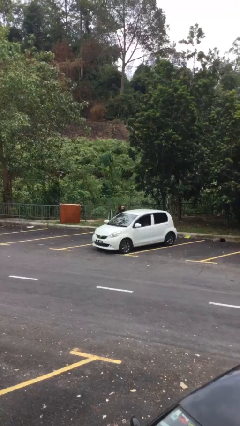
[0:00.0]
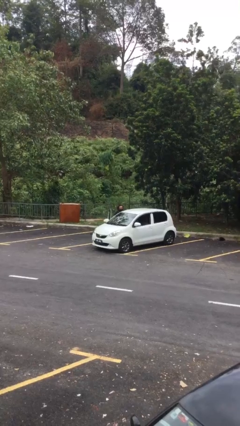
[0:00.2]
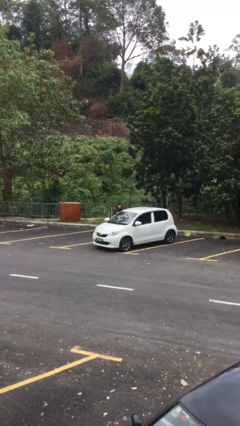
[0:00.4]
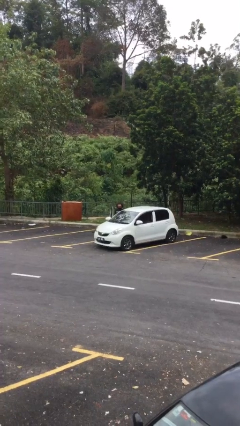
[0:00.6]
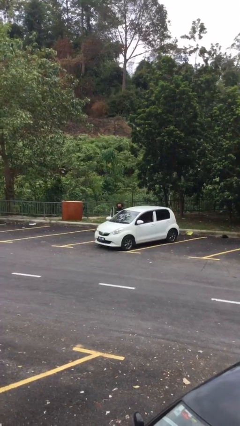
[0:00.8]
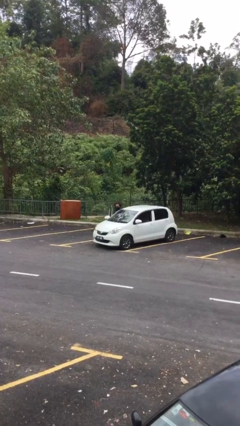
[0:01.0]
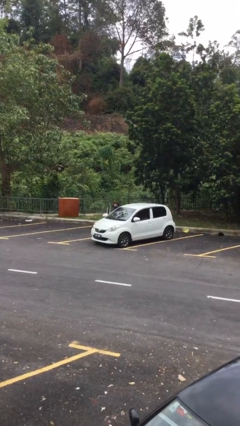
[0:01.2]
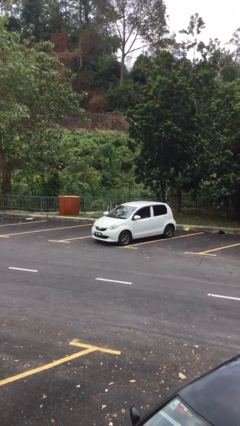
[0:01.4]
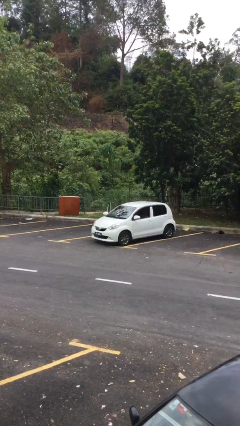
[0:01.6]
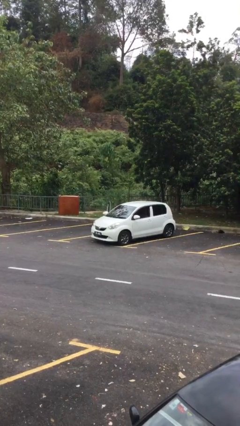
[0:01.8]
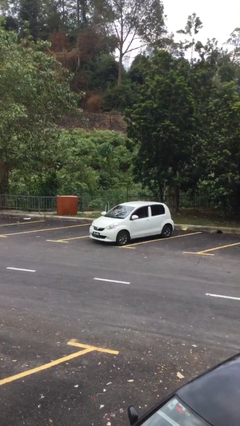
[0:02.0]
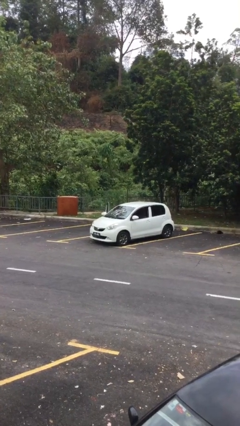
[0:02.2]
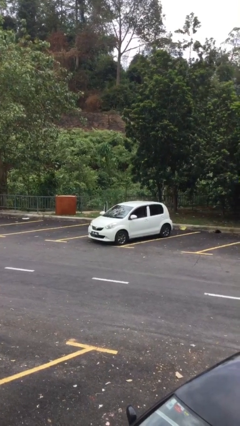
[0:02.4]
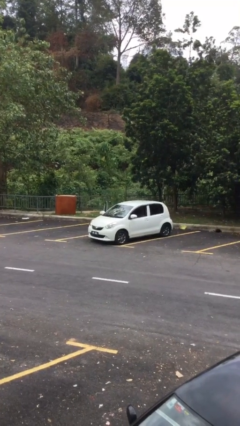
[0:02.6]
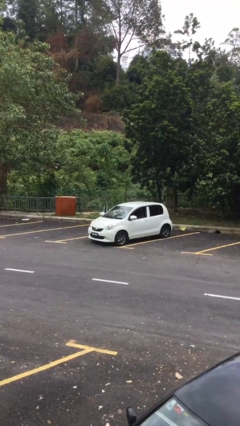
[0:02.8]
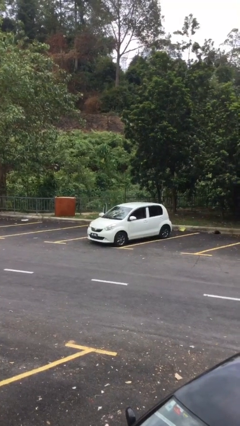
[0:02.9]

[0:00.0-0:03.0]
person enters car

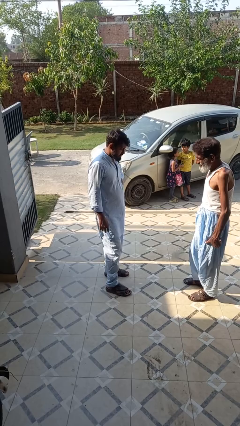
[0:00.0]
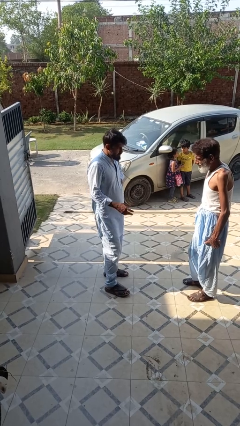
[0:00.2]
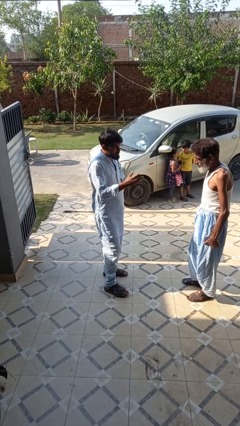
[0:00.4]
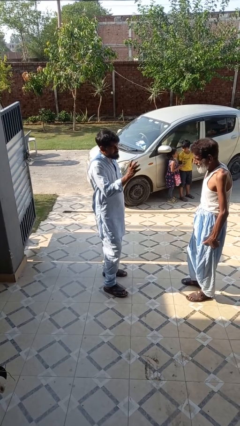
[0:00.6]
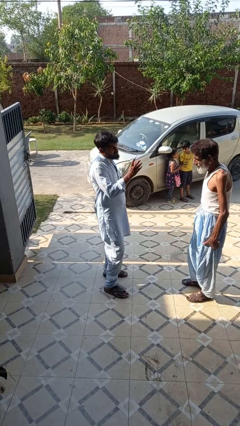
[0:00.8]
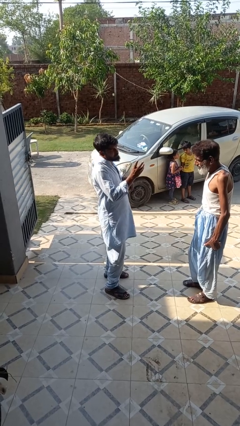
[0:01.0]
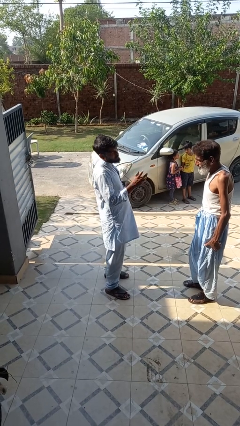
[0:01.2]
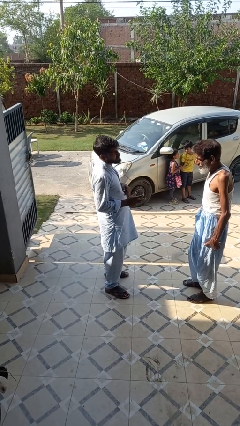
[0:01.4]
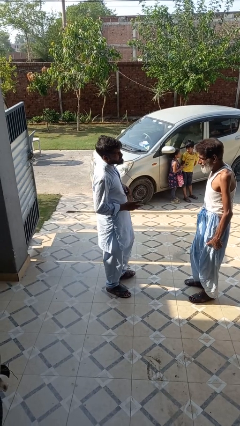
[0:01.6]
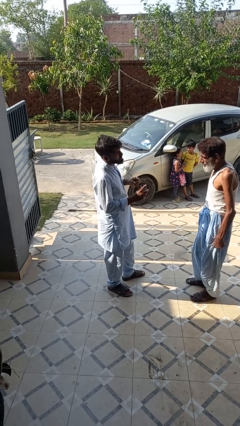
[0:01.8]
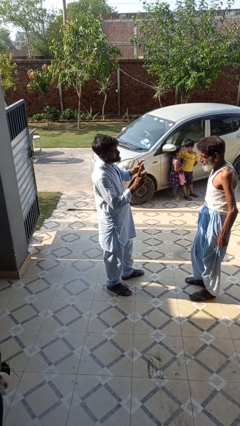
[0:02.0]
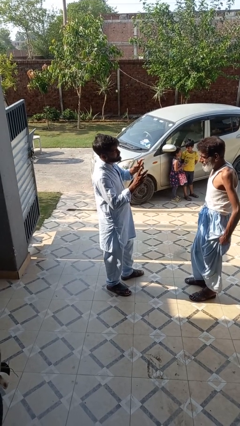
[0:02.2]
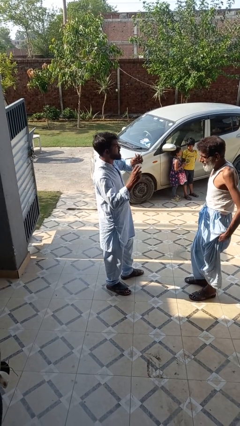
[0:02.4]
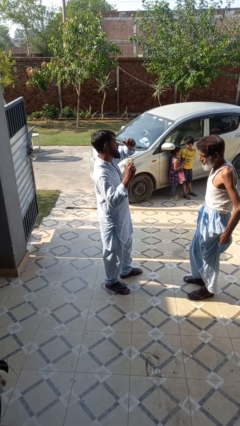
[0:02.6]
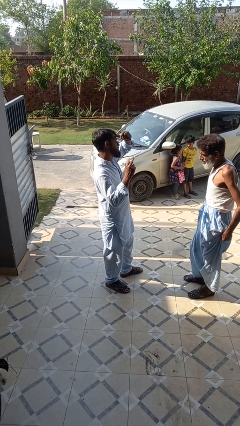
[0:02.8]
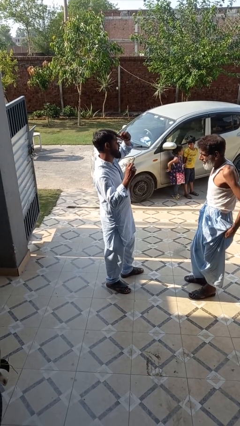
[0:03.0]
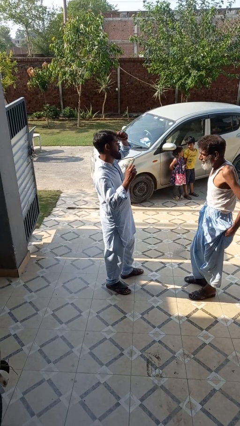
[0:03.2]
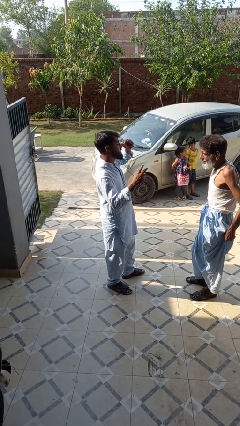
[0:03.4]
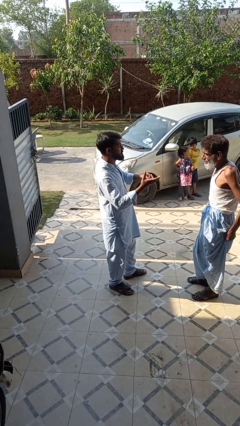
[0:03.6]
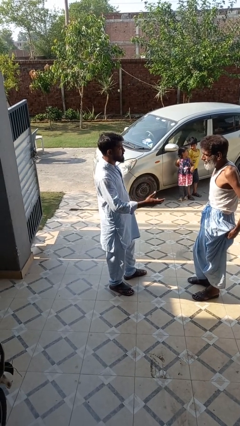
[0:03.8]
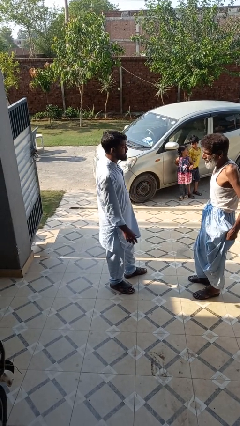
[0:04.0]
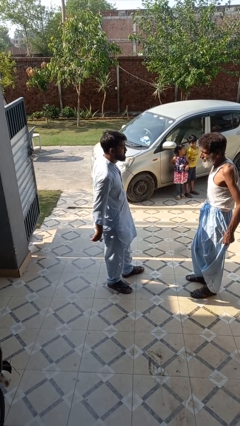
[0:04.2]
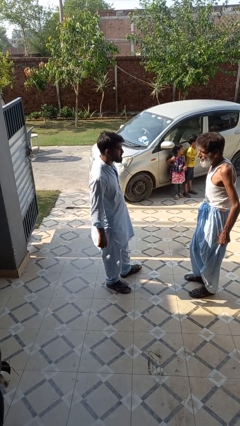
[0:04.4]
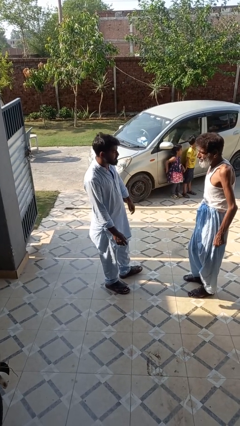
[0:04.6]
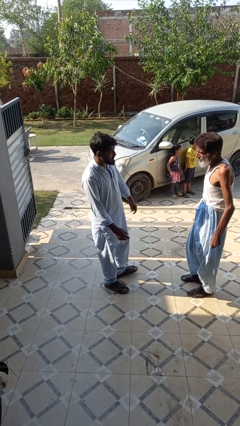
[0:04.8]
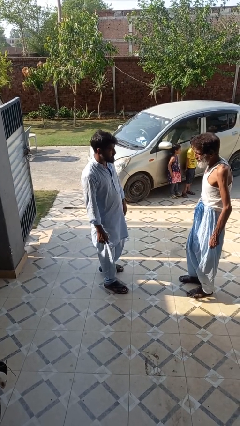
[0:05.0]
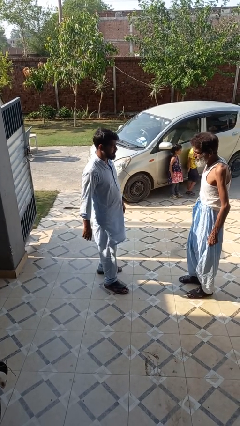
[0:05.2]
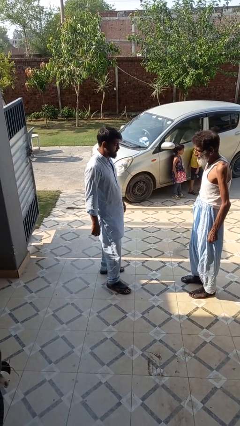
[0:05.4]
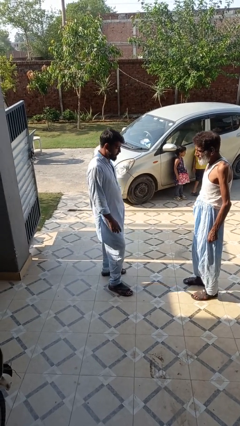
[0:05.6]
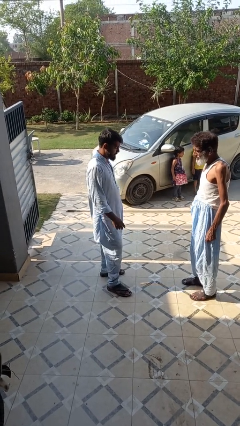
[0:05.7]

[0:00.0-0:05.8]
person talks to person

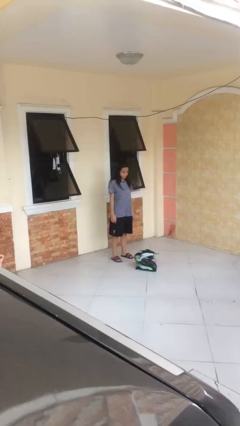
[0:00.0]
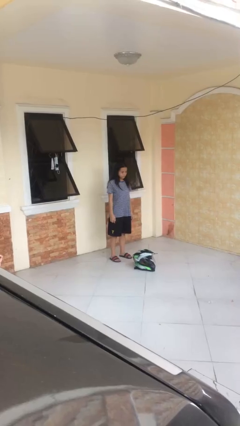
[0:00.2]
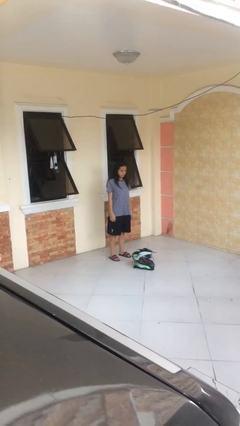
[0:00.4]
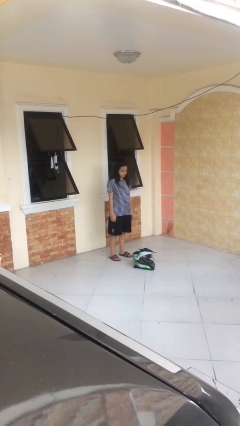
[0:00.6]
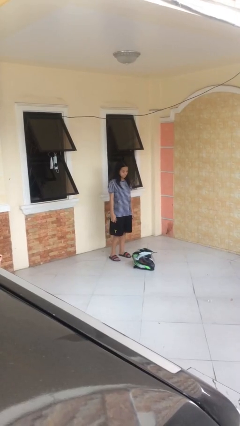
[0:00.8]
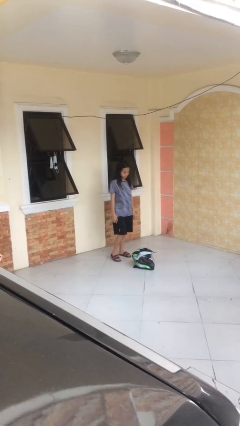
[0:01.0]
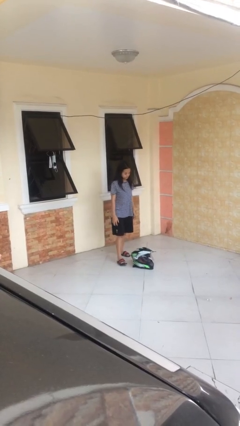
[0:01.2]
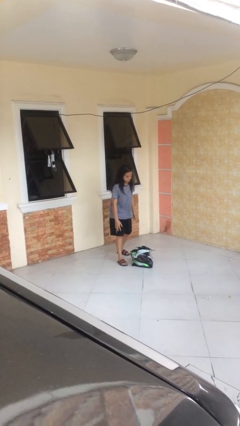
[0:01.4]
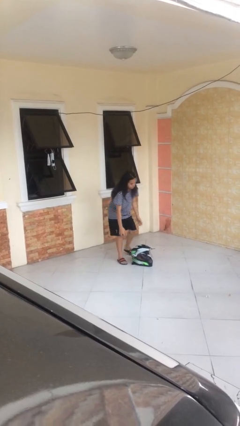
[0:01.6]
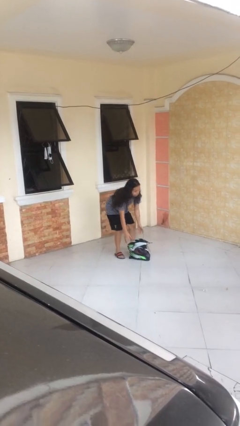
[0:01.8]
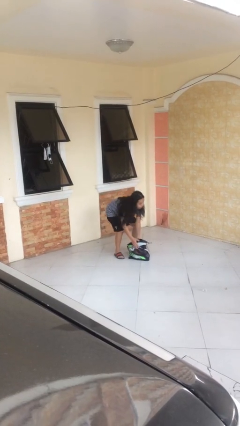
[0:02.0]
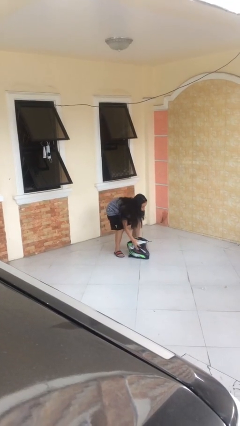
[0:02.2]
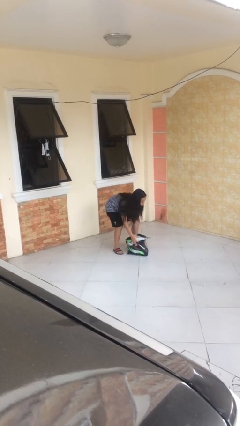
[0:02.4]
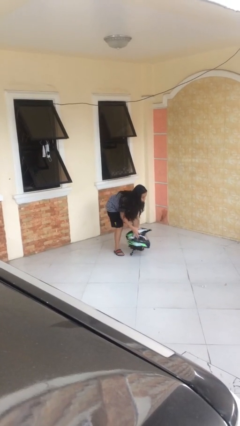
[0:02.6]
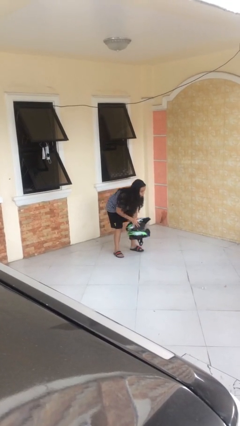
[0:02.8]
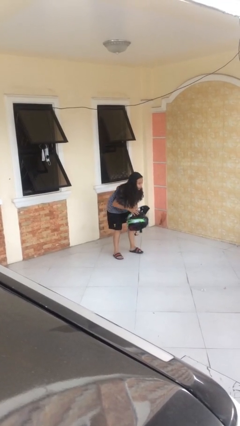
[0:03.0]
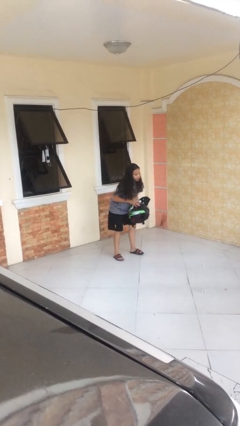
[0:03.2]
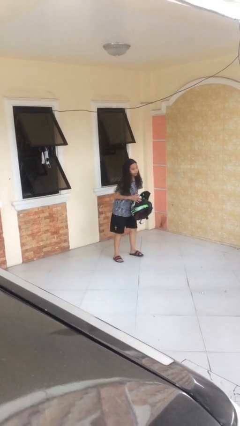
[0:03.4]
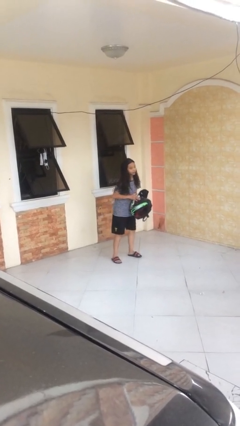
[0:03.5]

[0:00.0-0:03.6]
person picks up object from floor

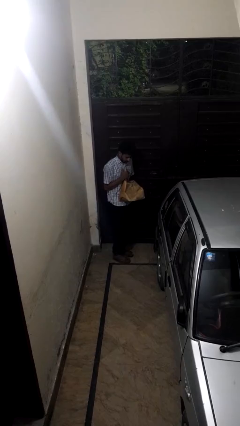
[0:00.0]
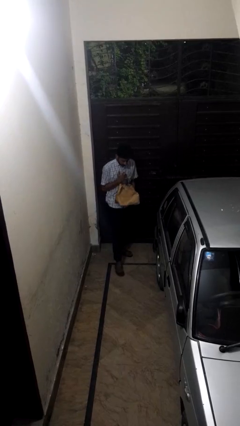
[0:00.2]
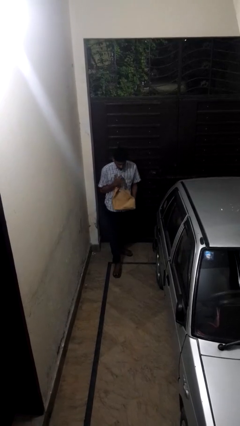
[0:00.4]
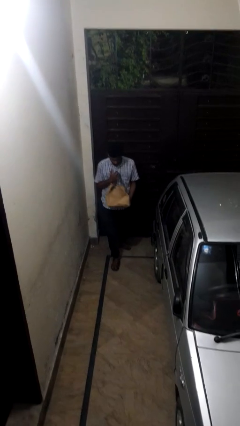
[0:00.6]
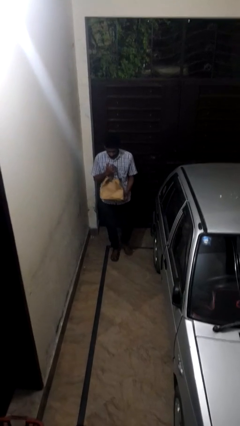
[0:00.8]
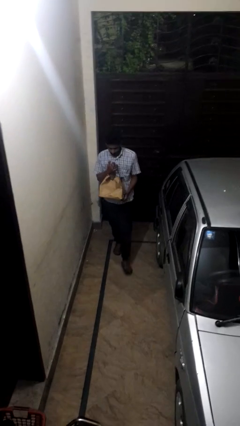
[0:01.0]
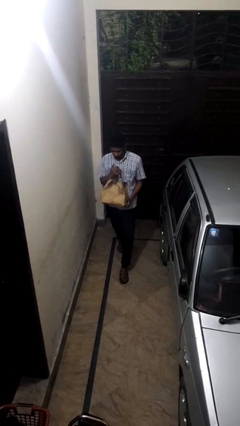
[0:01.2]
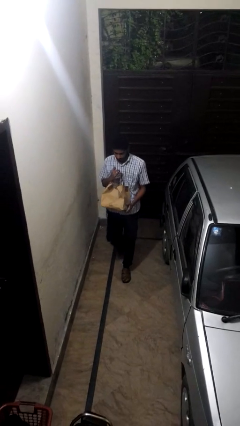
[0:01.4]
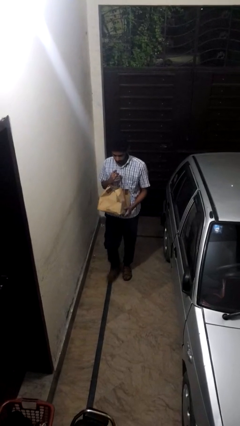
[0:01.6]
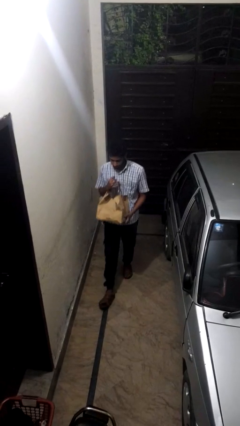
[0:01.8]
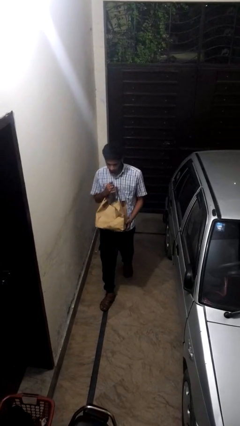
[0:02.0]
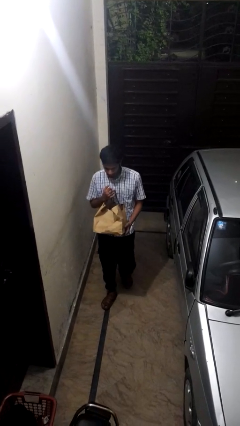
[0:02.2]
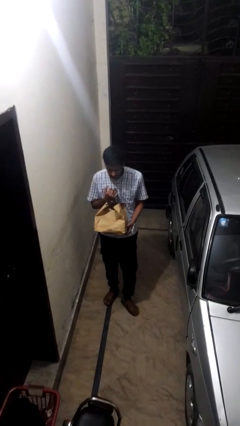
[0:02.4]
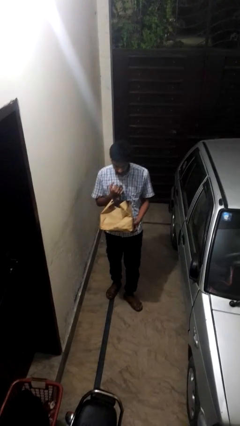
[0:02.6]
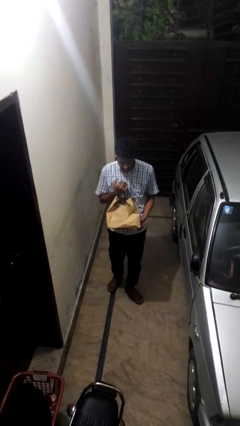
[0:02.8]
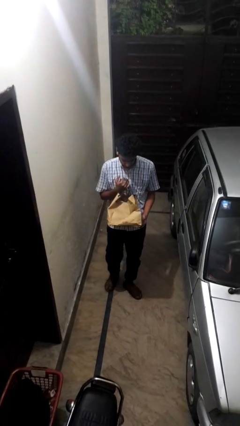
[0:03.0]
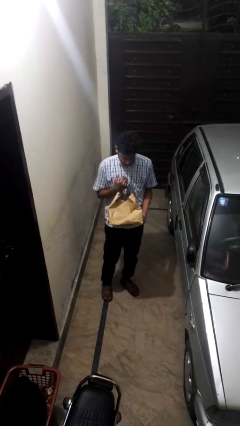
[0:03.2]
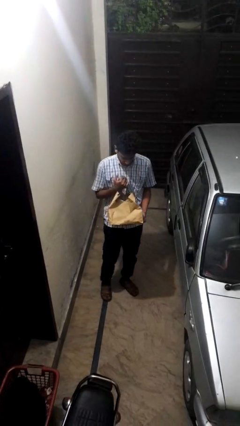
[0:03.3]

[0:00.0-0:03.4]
person carries groceries

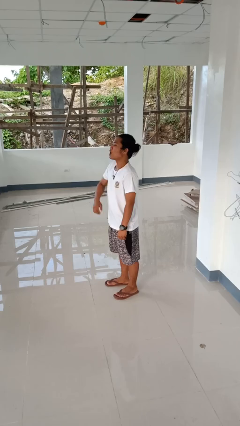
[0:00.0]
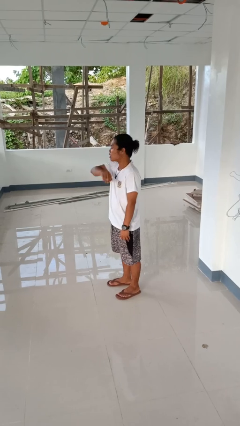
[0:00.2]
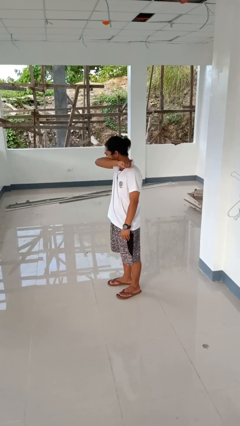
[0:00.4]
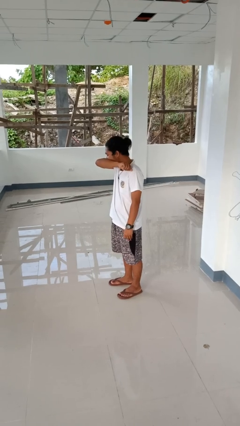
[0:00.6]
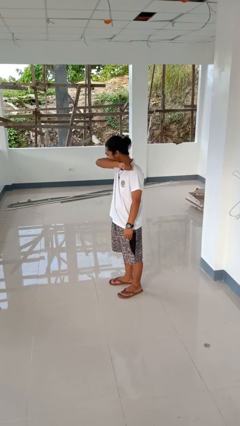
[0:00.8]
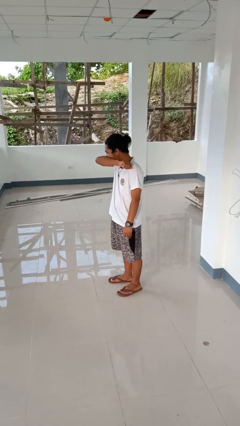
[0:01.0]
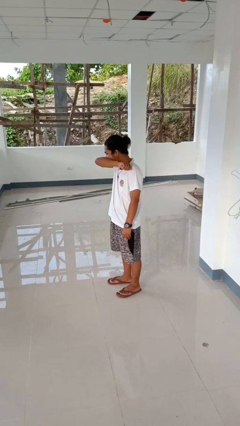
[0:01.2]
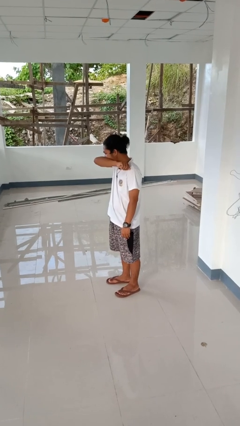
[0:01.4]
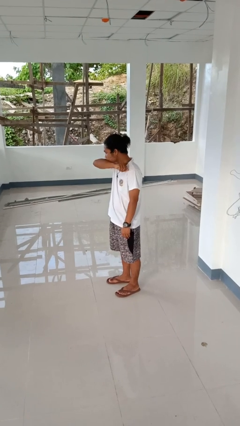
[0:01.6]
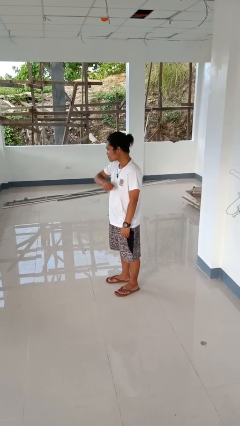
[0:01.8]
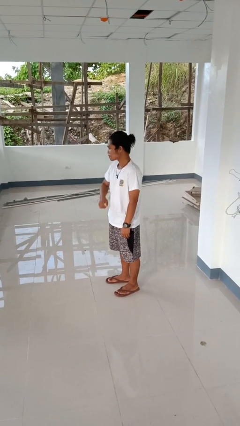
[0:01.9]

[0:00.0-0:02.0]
person sneezes into arm
